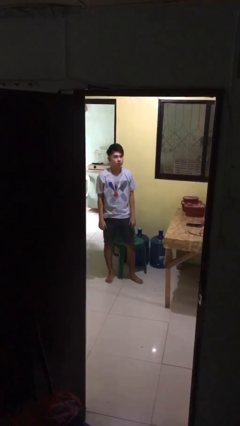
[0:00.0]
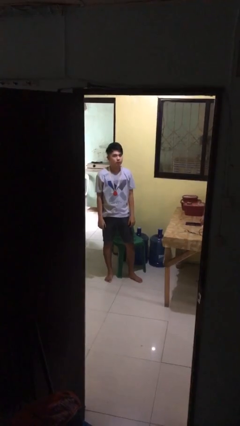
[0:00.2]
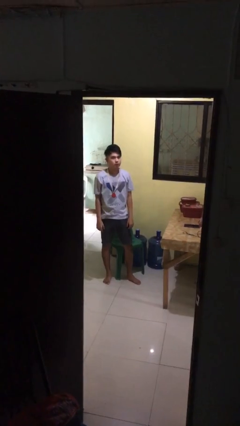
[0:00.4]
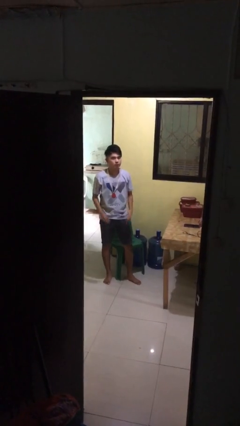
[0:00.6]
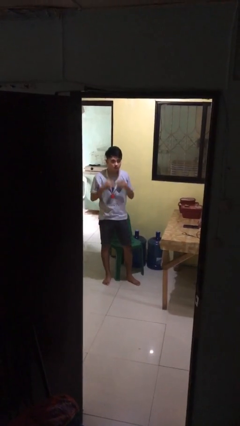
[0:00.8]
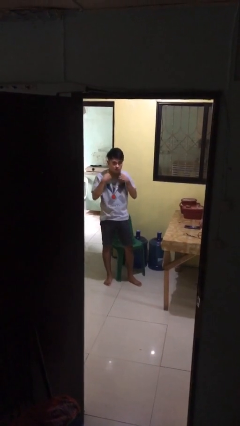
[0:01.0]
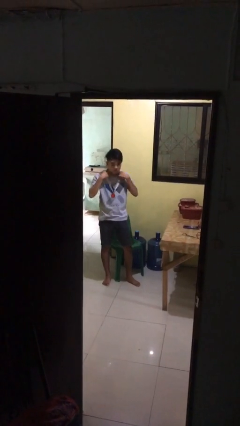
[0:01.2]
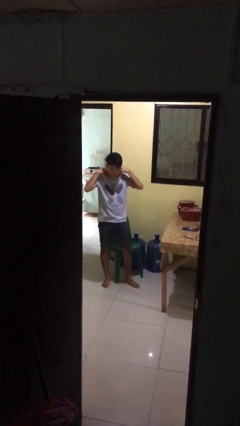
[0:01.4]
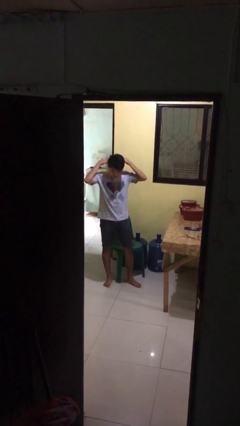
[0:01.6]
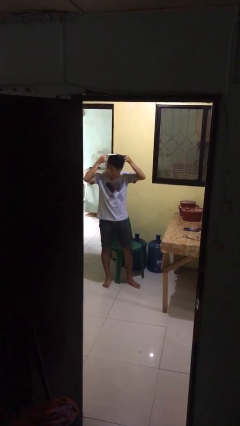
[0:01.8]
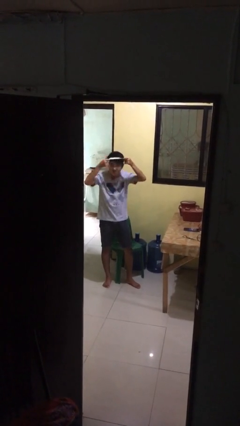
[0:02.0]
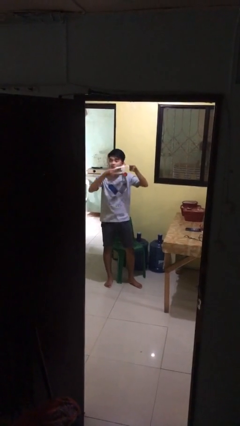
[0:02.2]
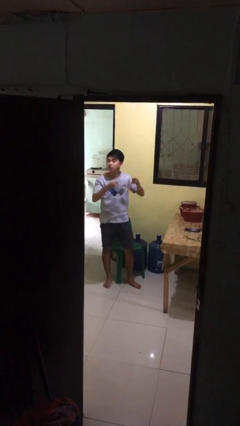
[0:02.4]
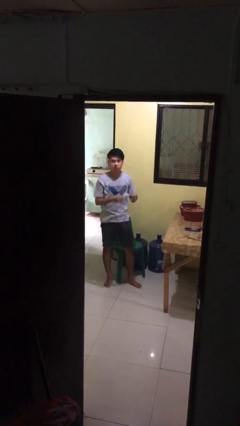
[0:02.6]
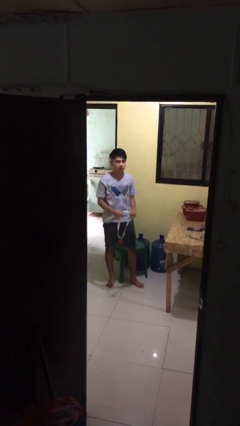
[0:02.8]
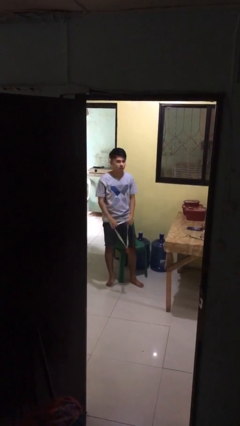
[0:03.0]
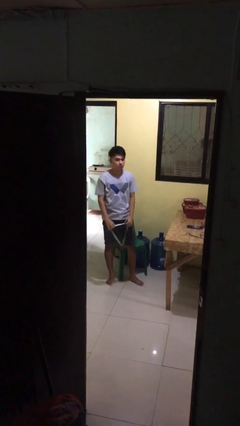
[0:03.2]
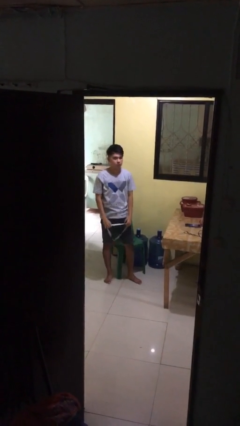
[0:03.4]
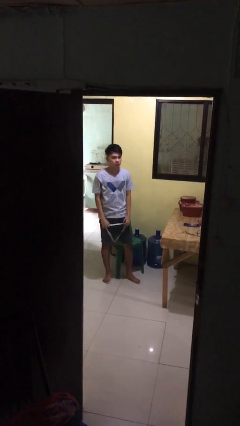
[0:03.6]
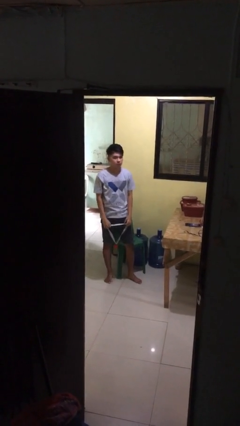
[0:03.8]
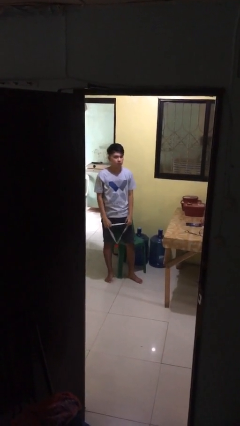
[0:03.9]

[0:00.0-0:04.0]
person takes off necklace

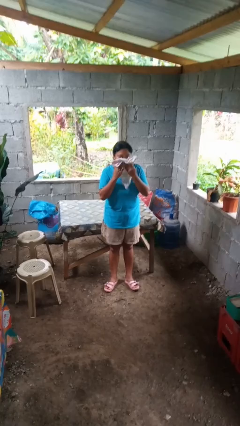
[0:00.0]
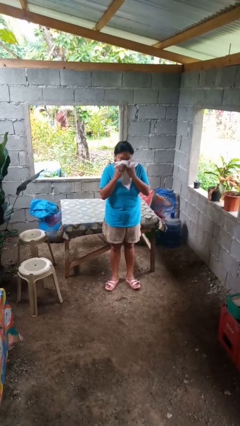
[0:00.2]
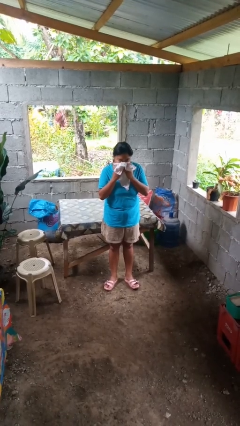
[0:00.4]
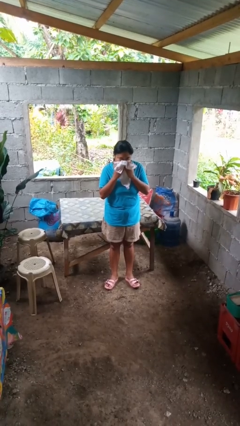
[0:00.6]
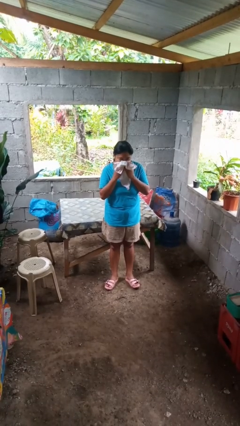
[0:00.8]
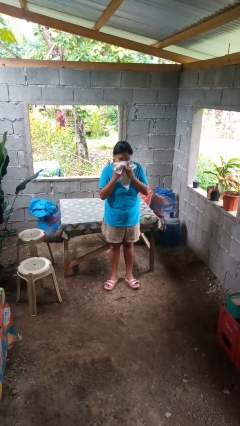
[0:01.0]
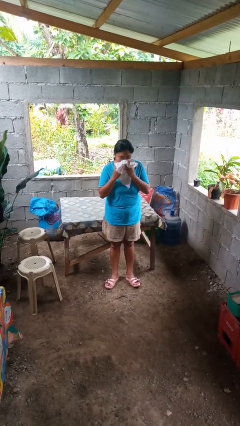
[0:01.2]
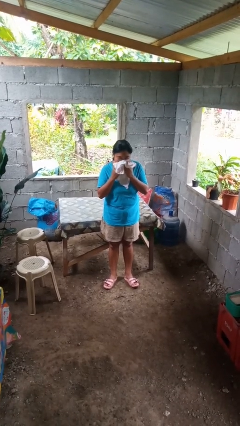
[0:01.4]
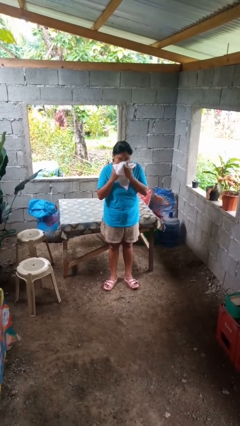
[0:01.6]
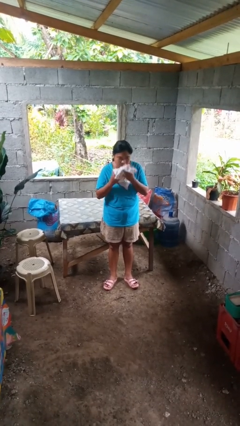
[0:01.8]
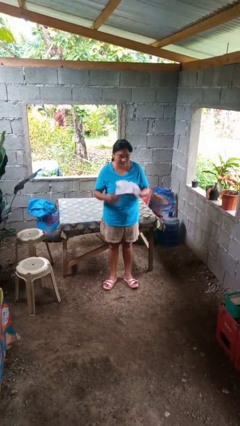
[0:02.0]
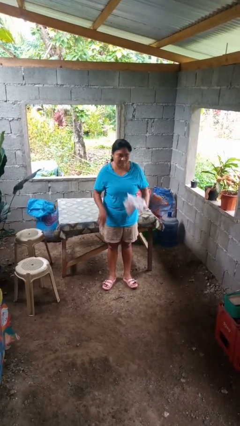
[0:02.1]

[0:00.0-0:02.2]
person blows nose

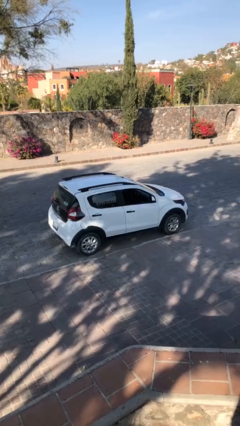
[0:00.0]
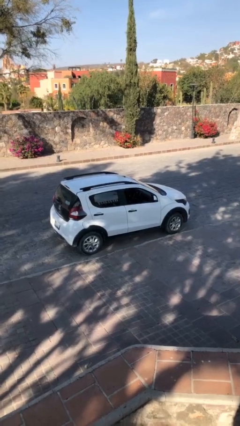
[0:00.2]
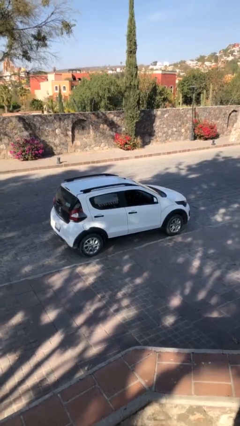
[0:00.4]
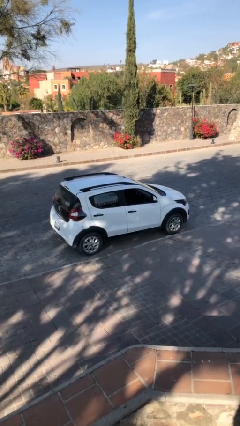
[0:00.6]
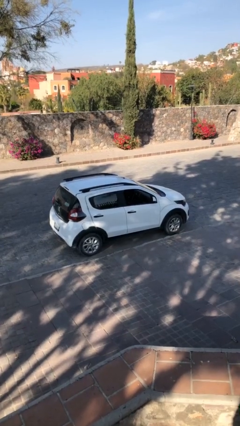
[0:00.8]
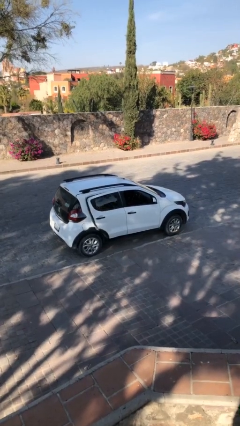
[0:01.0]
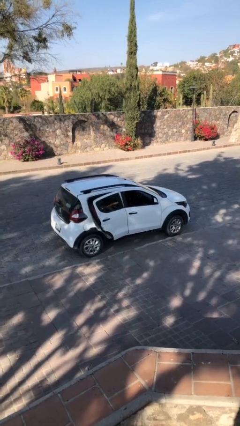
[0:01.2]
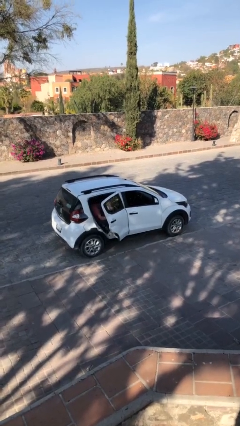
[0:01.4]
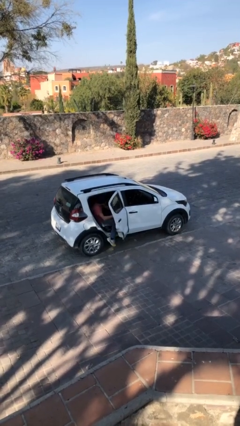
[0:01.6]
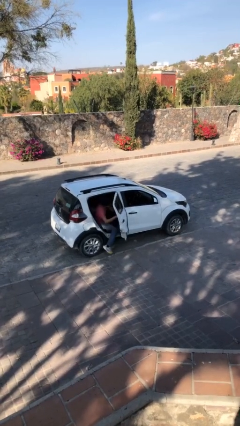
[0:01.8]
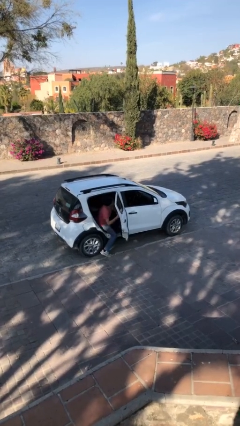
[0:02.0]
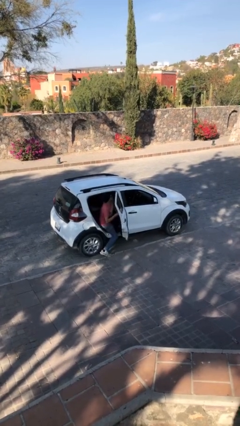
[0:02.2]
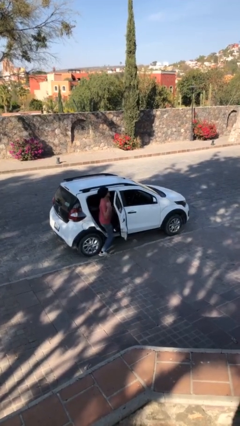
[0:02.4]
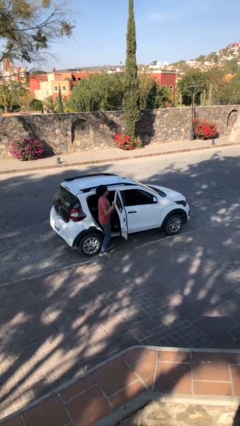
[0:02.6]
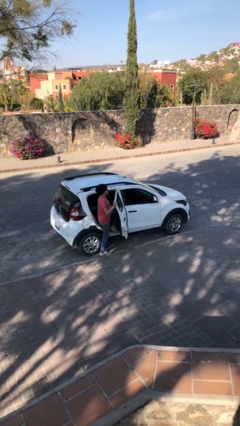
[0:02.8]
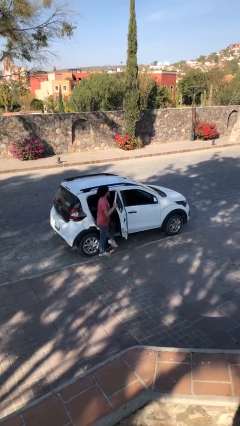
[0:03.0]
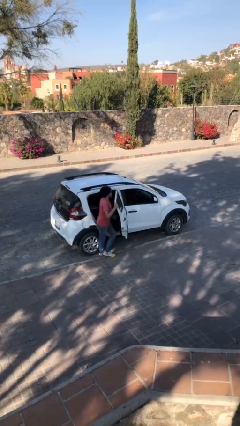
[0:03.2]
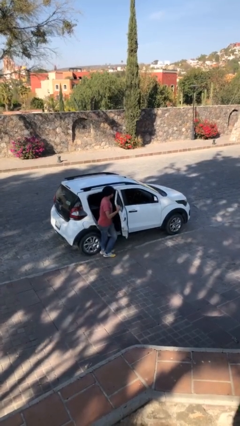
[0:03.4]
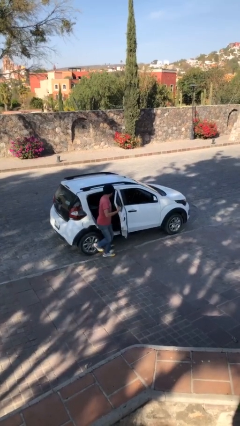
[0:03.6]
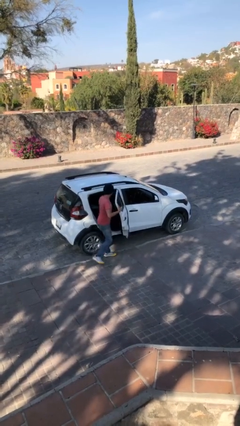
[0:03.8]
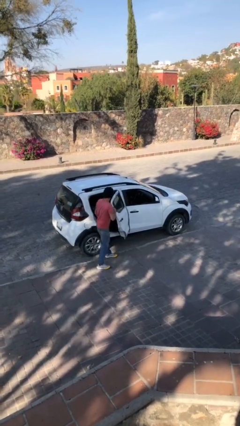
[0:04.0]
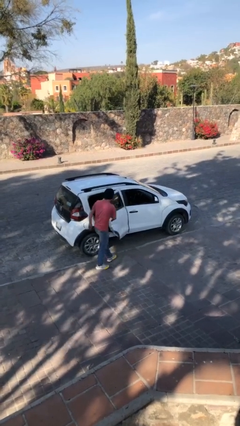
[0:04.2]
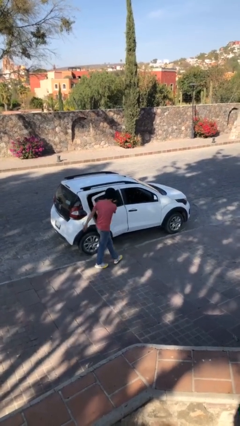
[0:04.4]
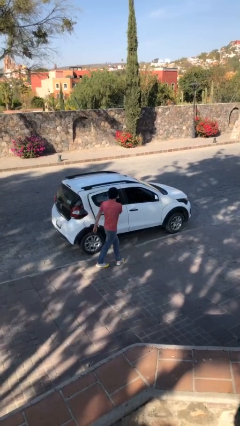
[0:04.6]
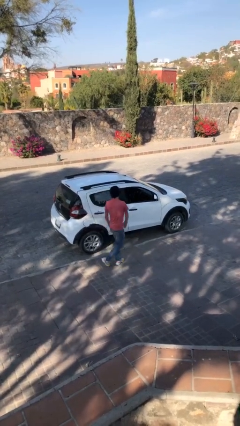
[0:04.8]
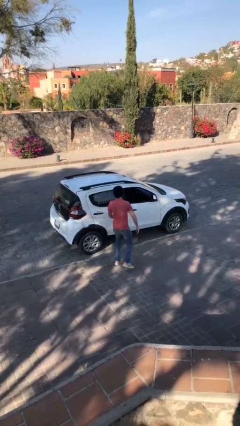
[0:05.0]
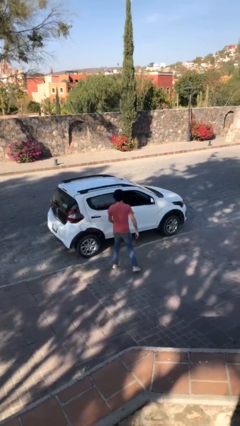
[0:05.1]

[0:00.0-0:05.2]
car drops off person

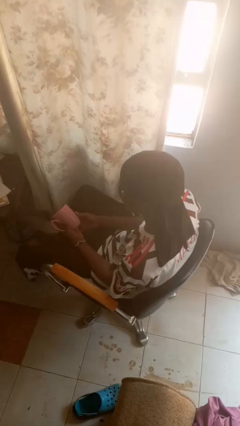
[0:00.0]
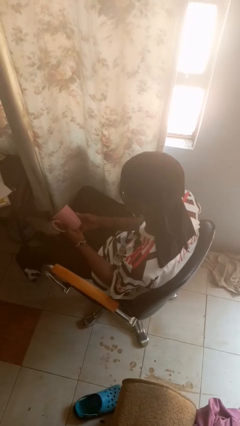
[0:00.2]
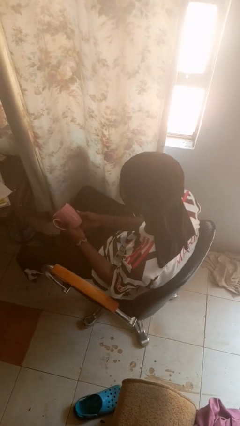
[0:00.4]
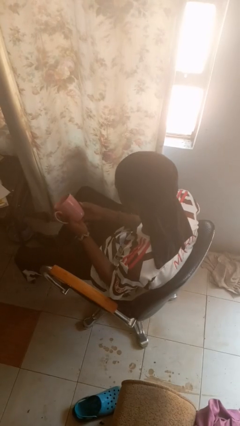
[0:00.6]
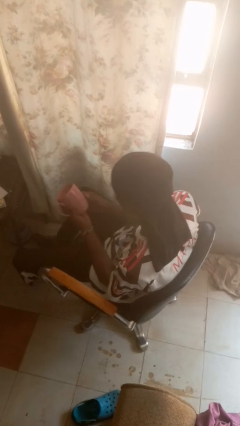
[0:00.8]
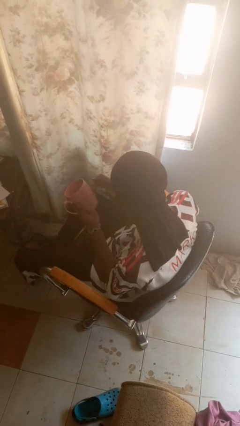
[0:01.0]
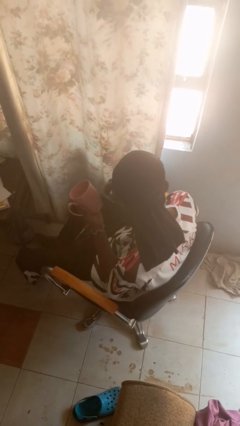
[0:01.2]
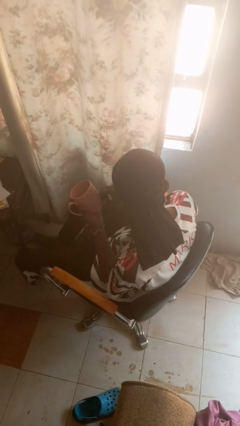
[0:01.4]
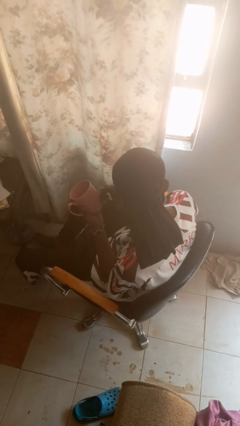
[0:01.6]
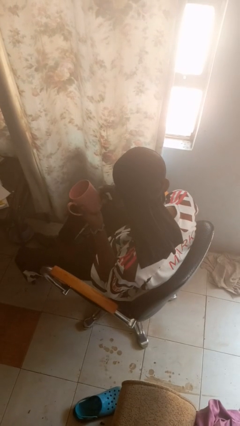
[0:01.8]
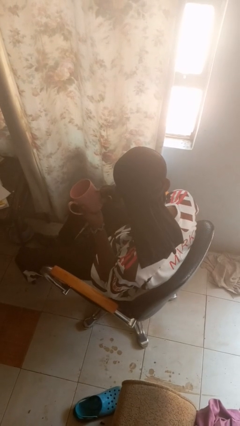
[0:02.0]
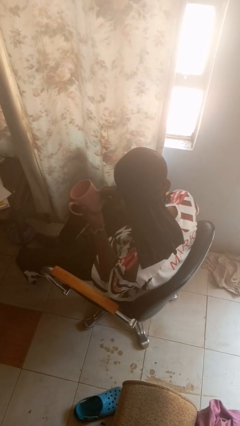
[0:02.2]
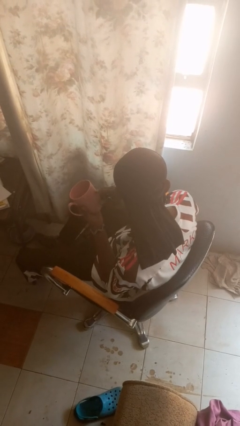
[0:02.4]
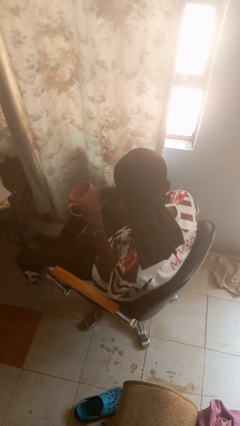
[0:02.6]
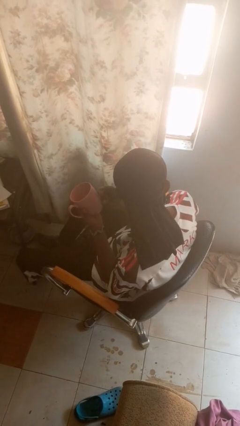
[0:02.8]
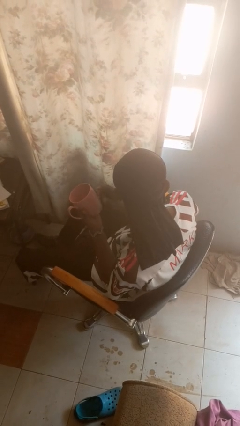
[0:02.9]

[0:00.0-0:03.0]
person taps object with finger

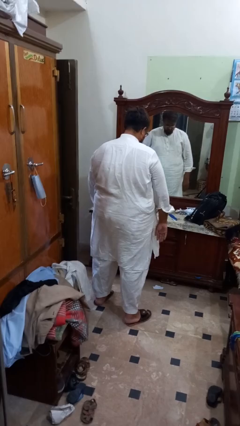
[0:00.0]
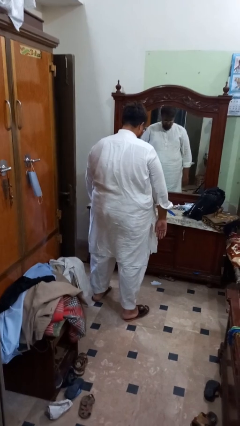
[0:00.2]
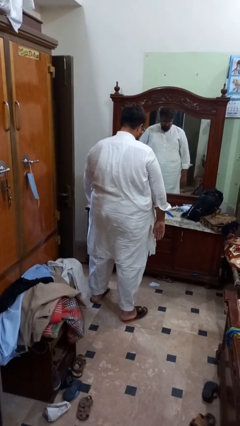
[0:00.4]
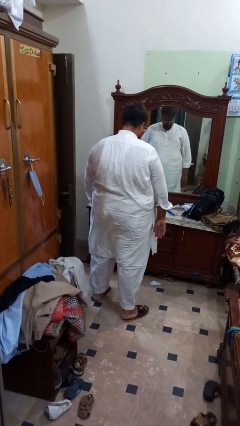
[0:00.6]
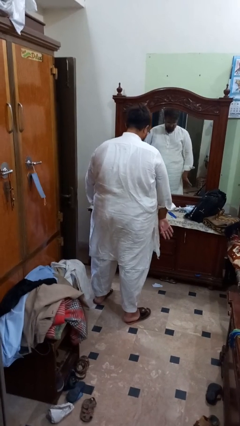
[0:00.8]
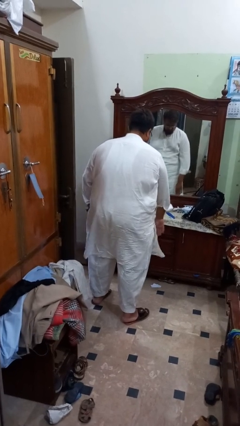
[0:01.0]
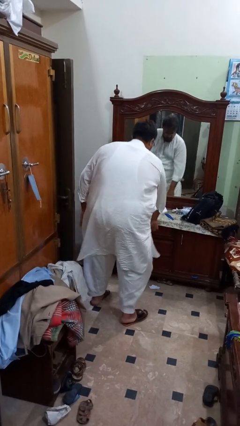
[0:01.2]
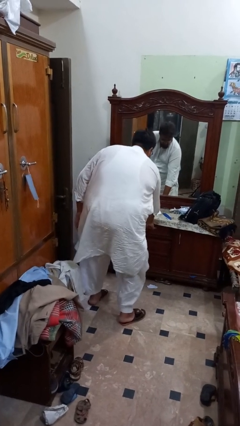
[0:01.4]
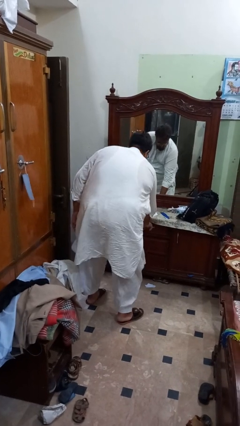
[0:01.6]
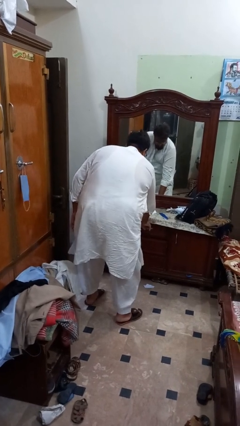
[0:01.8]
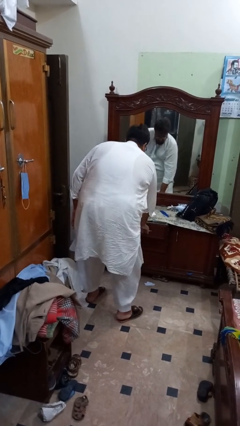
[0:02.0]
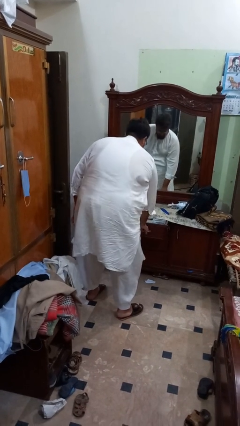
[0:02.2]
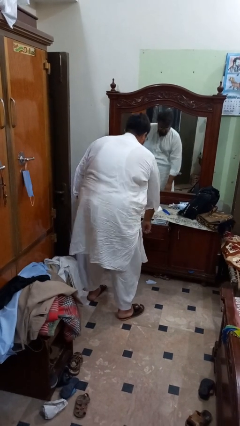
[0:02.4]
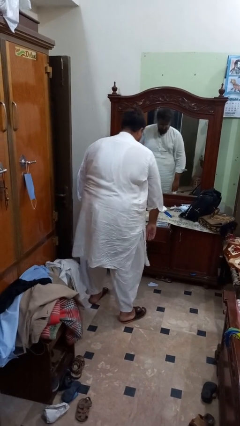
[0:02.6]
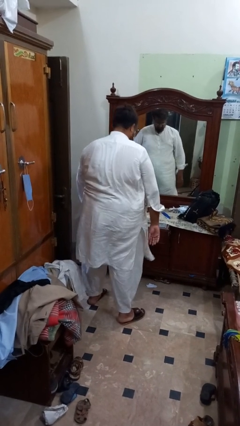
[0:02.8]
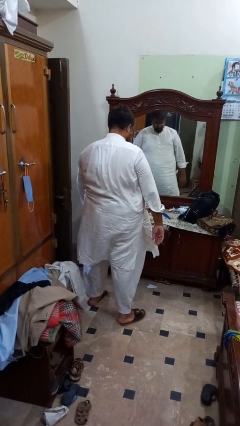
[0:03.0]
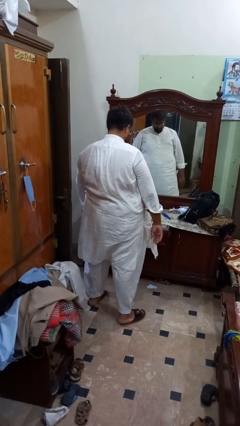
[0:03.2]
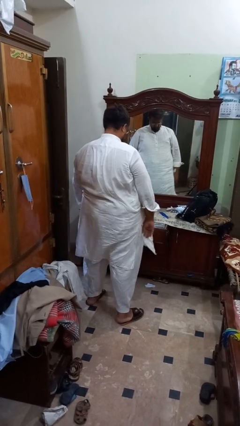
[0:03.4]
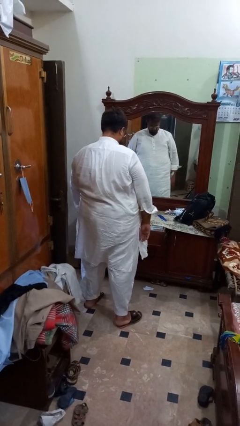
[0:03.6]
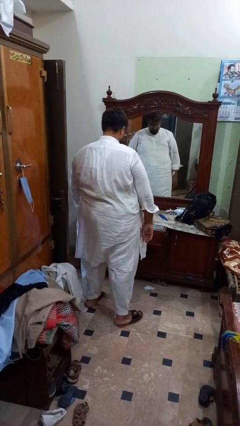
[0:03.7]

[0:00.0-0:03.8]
person opens dresser drawer
